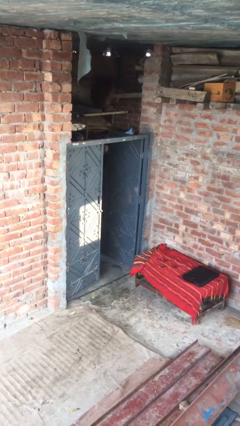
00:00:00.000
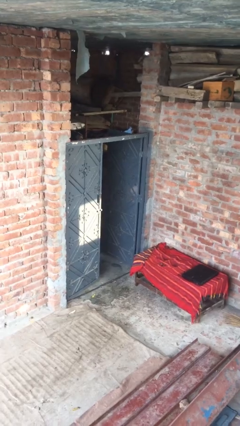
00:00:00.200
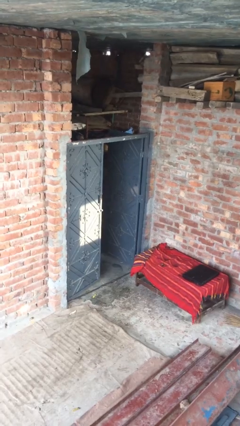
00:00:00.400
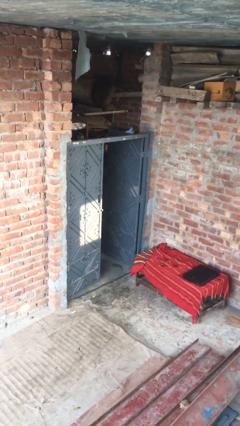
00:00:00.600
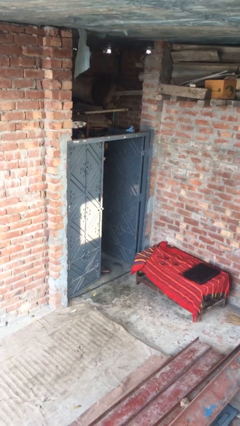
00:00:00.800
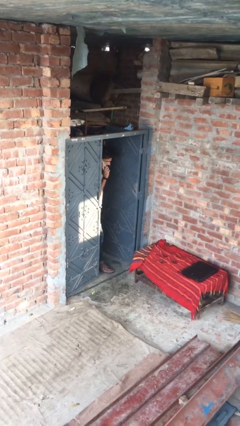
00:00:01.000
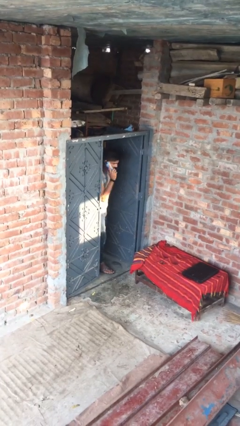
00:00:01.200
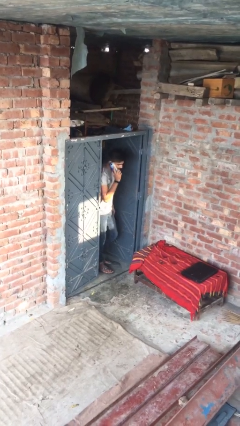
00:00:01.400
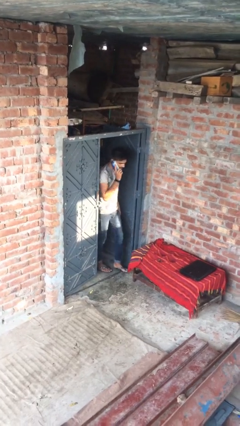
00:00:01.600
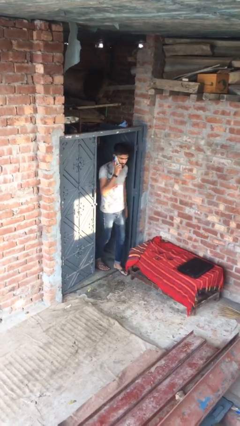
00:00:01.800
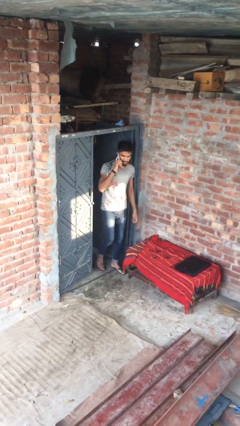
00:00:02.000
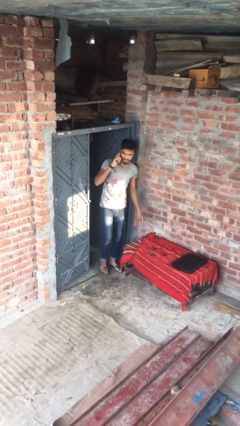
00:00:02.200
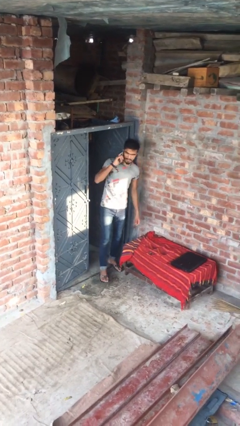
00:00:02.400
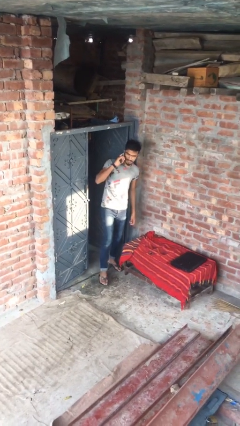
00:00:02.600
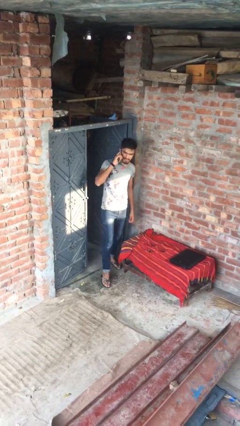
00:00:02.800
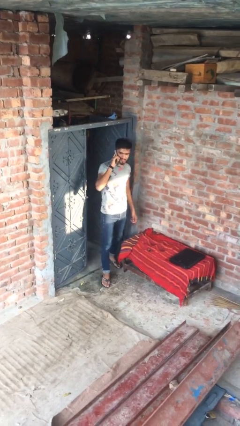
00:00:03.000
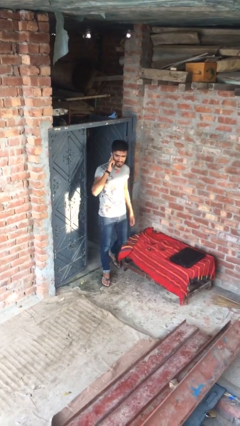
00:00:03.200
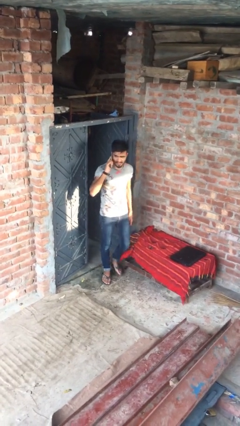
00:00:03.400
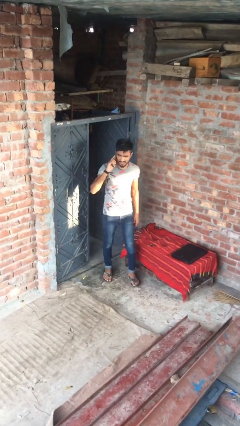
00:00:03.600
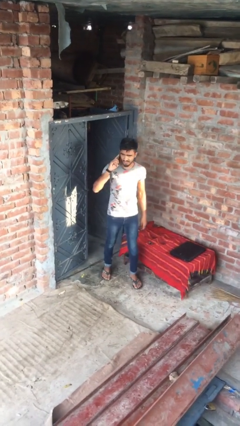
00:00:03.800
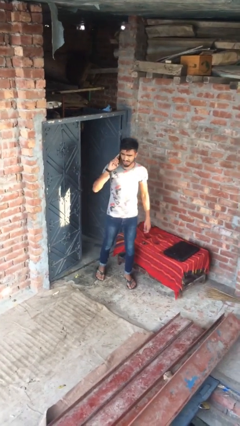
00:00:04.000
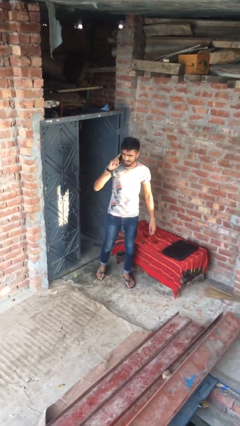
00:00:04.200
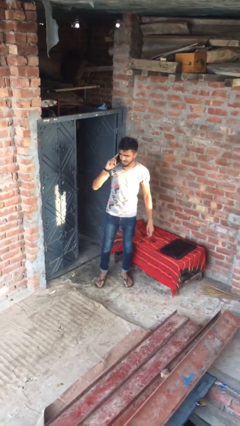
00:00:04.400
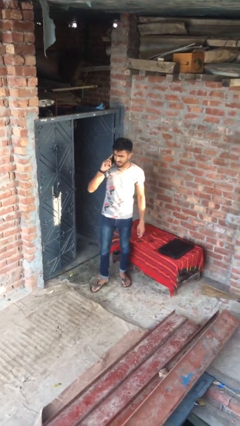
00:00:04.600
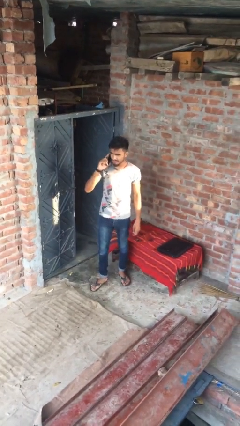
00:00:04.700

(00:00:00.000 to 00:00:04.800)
person enters scene through structure

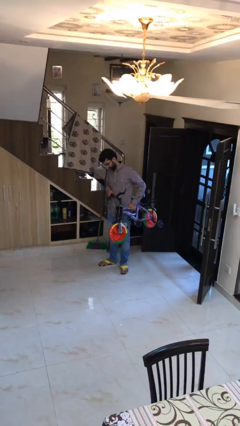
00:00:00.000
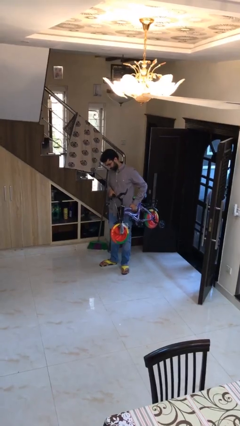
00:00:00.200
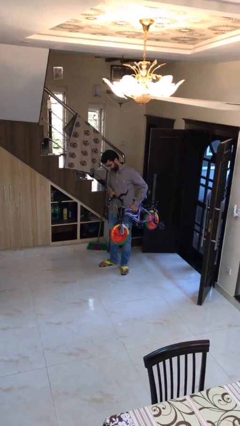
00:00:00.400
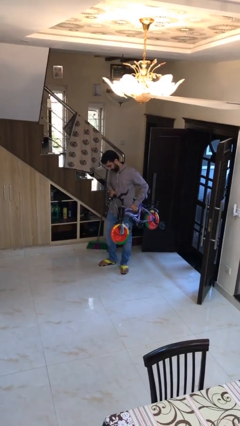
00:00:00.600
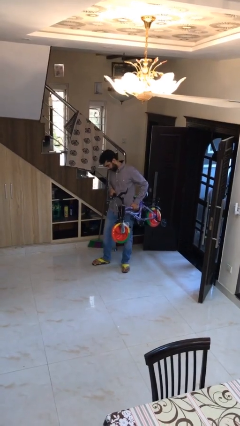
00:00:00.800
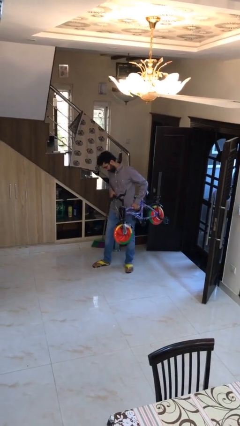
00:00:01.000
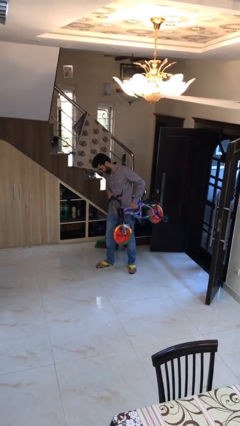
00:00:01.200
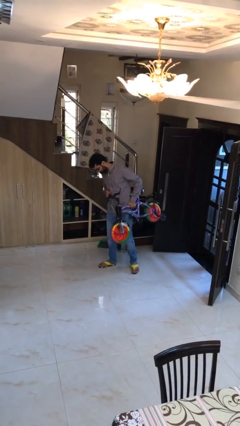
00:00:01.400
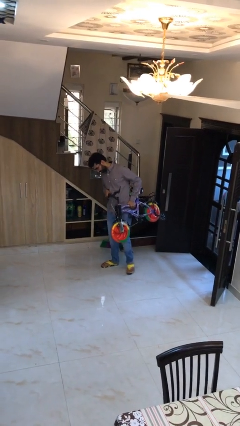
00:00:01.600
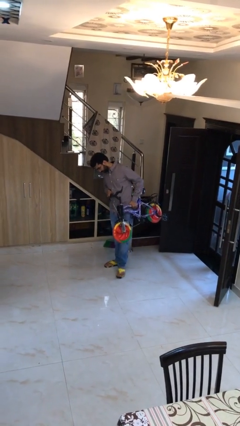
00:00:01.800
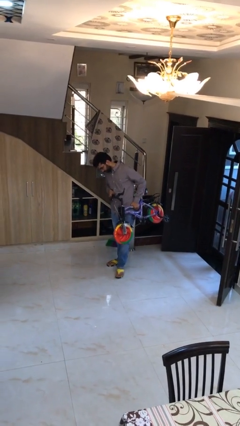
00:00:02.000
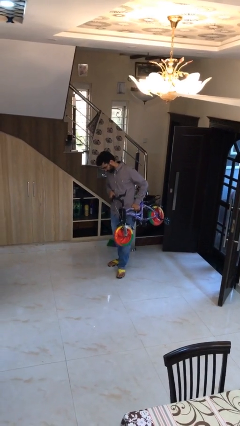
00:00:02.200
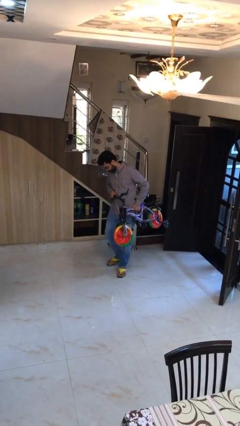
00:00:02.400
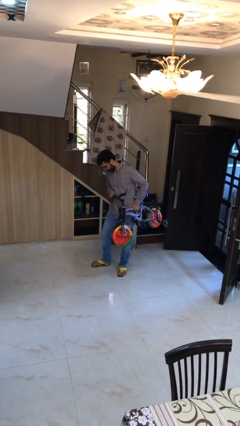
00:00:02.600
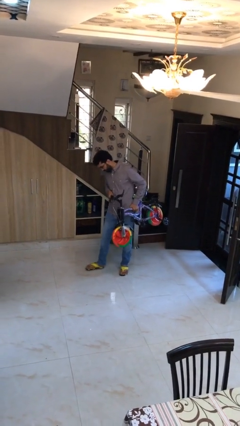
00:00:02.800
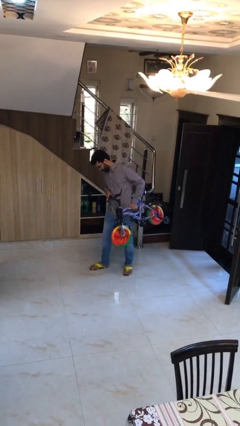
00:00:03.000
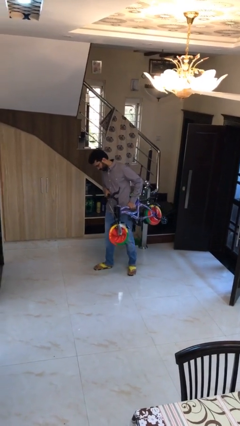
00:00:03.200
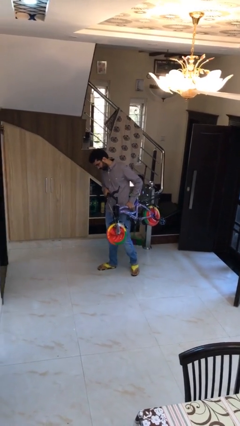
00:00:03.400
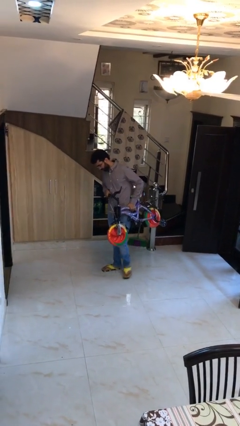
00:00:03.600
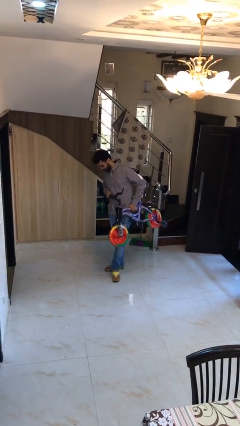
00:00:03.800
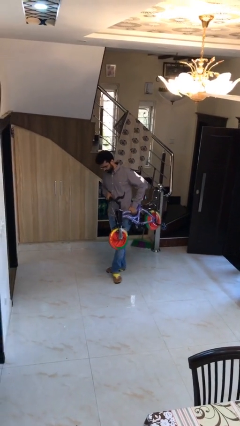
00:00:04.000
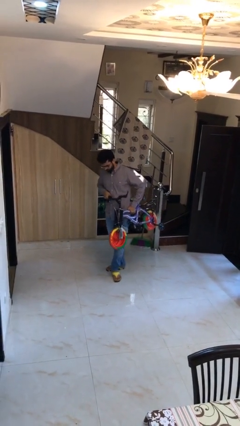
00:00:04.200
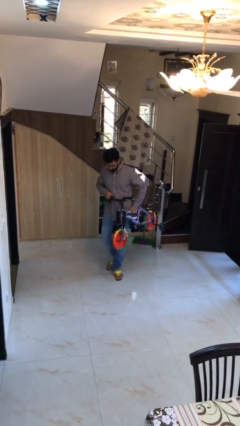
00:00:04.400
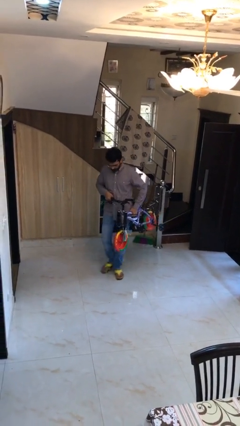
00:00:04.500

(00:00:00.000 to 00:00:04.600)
person carries heavy object

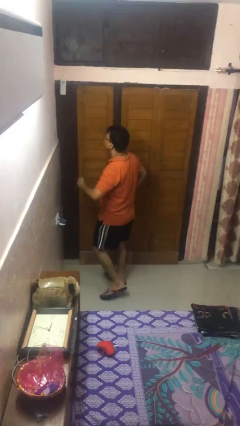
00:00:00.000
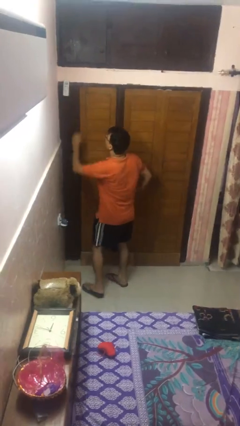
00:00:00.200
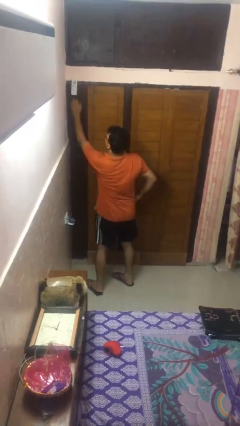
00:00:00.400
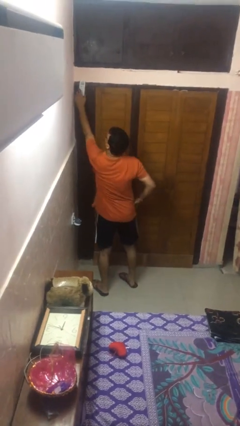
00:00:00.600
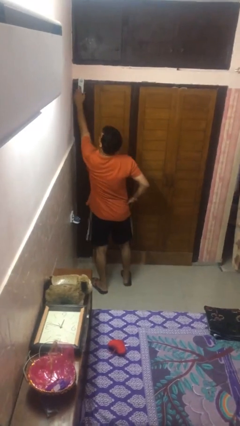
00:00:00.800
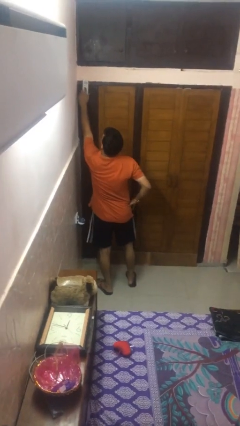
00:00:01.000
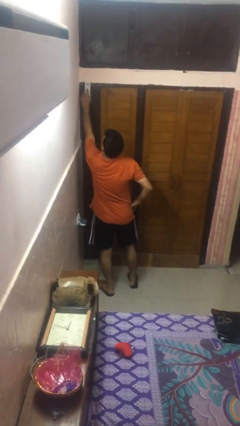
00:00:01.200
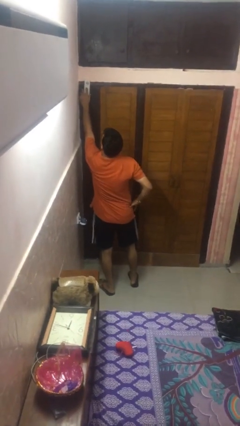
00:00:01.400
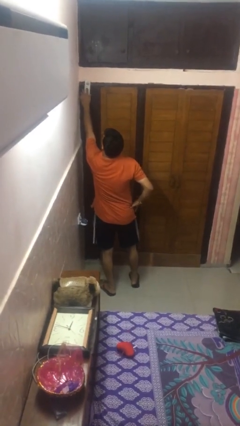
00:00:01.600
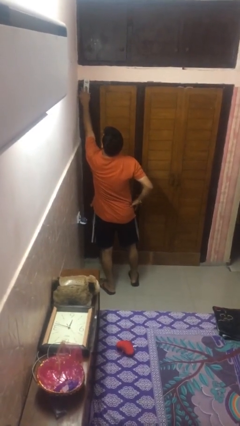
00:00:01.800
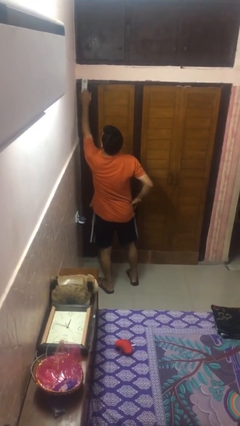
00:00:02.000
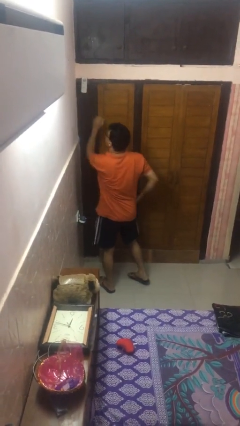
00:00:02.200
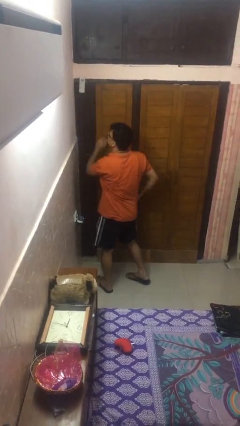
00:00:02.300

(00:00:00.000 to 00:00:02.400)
person adjusts thermostat

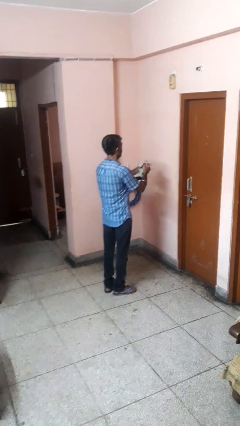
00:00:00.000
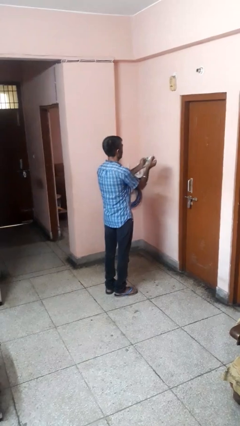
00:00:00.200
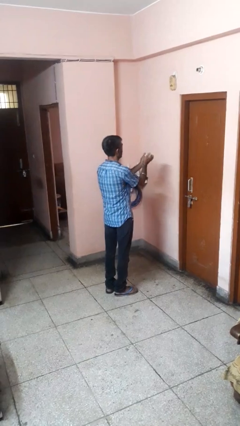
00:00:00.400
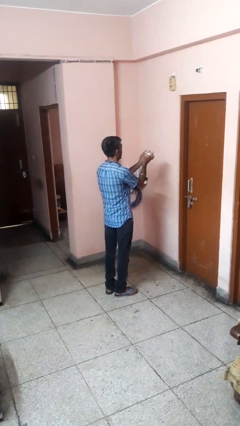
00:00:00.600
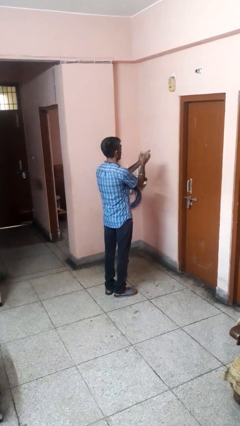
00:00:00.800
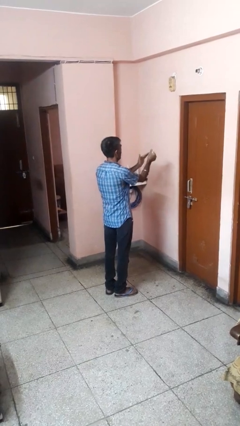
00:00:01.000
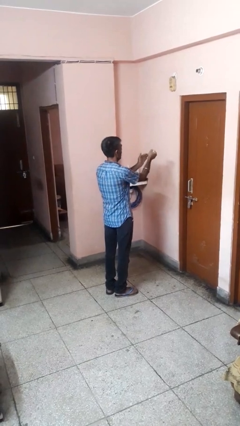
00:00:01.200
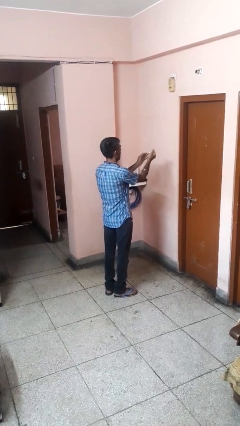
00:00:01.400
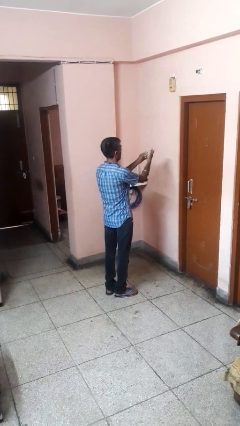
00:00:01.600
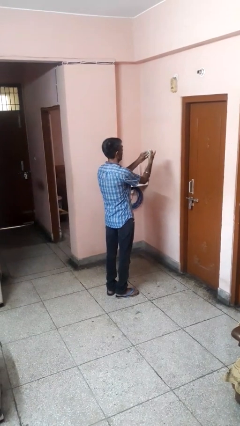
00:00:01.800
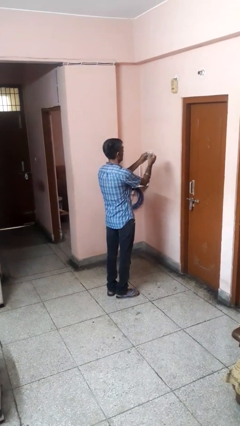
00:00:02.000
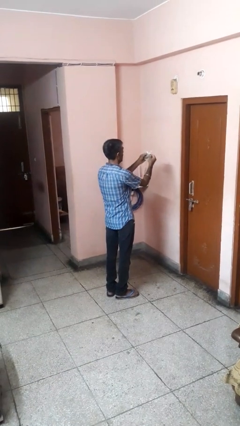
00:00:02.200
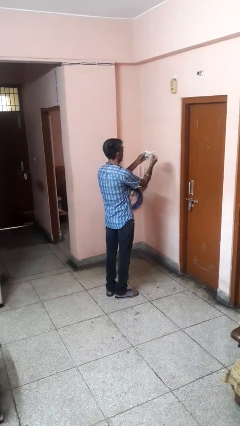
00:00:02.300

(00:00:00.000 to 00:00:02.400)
person crumples paper

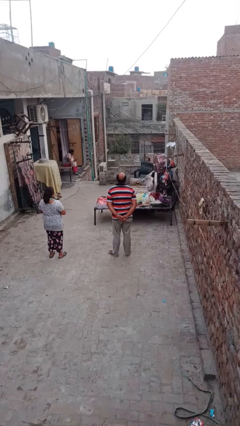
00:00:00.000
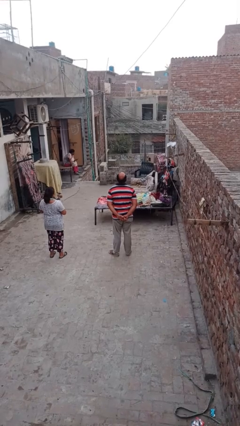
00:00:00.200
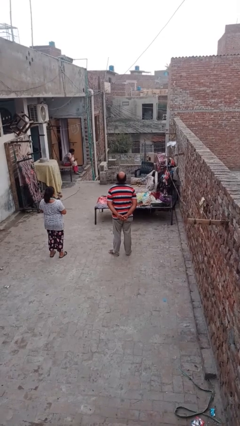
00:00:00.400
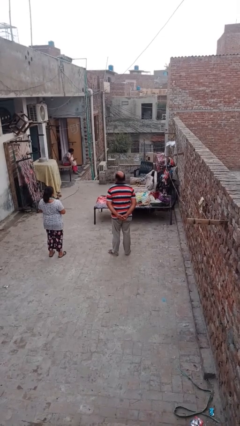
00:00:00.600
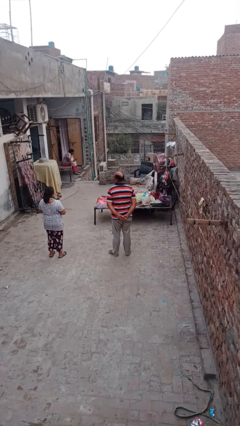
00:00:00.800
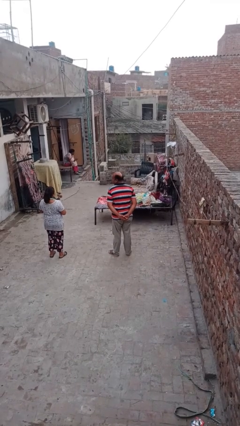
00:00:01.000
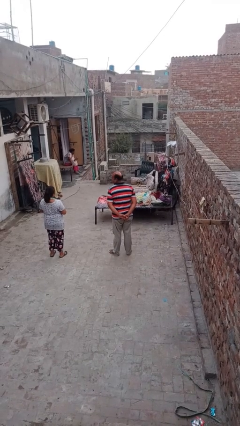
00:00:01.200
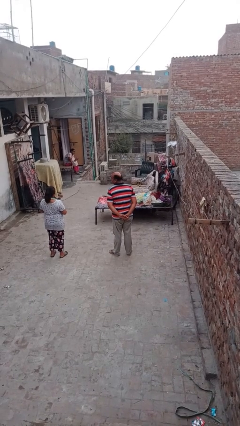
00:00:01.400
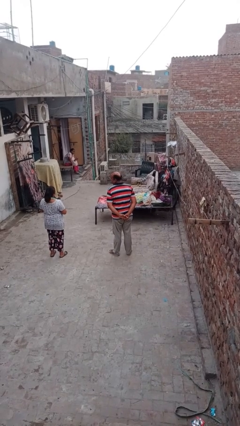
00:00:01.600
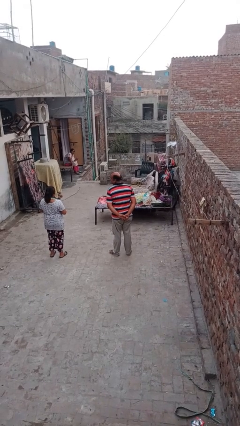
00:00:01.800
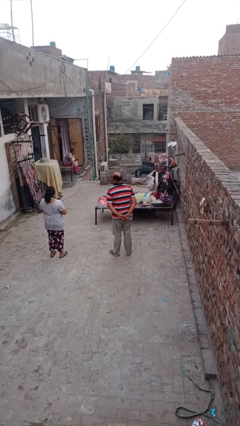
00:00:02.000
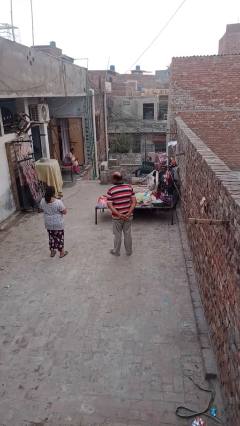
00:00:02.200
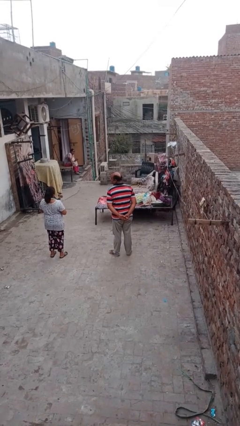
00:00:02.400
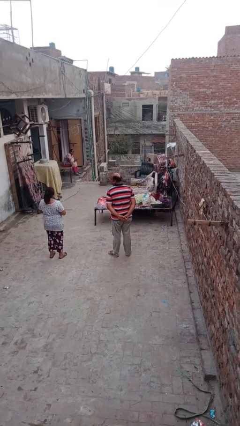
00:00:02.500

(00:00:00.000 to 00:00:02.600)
person looks over shoulder

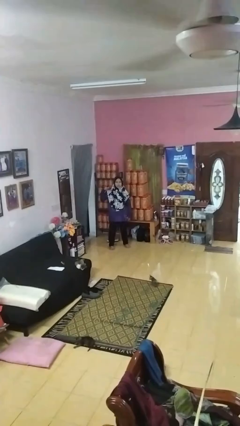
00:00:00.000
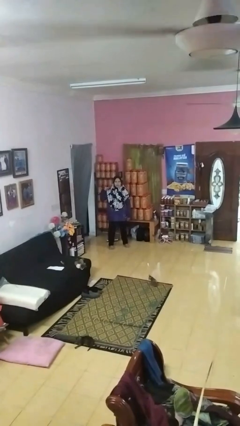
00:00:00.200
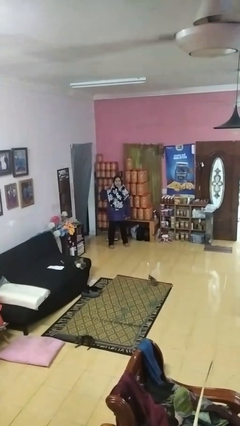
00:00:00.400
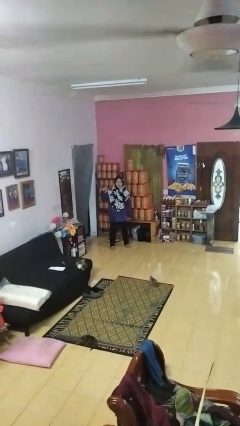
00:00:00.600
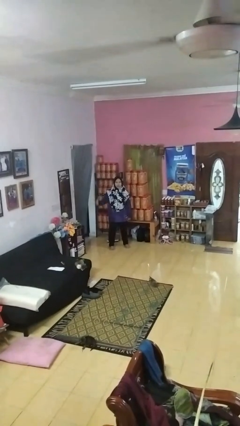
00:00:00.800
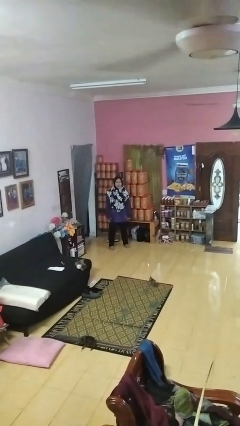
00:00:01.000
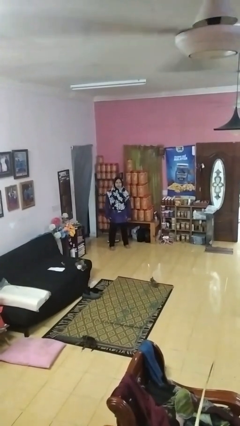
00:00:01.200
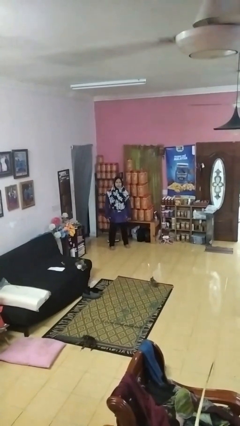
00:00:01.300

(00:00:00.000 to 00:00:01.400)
person gestures cut
